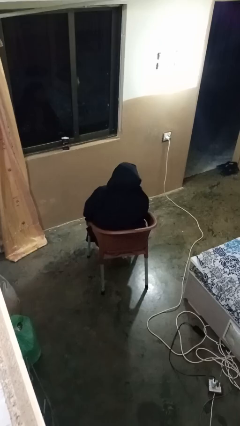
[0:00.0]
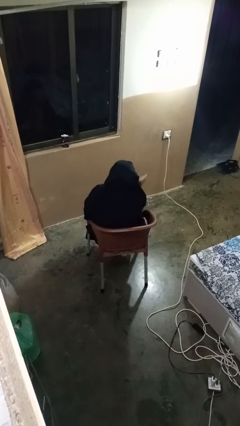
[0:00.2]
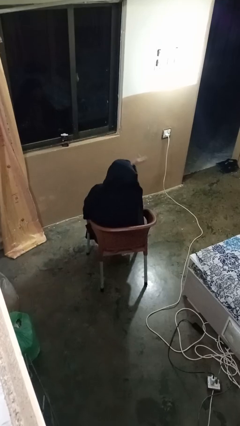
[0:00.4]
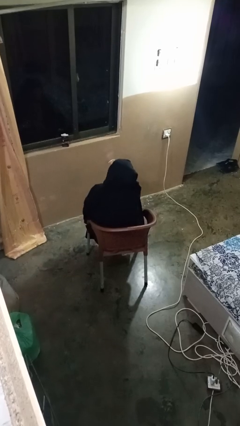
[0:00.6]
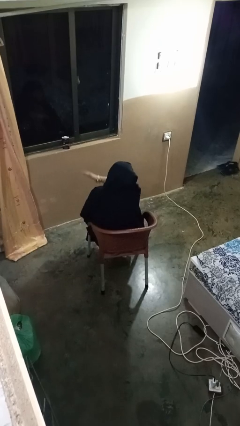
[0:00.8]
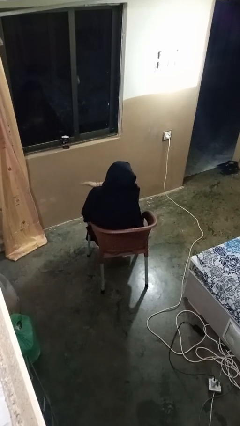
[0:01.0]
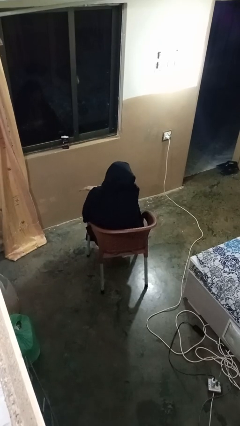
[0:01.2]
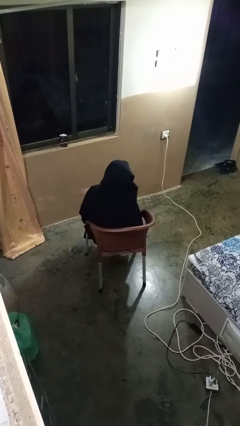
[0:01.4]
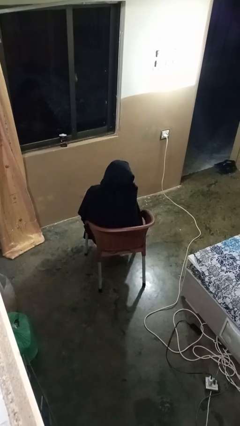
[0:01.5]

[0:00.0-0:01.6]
person gestures swipe left

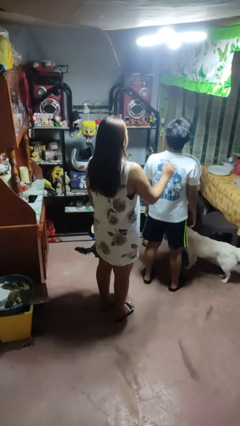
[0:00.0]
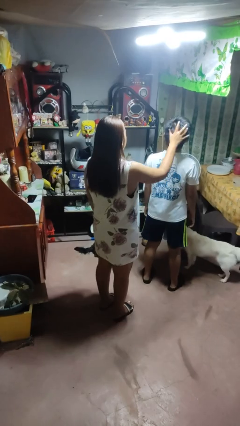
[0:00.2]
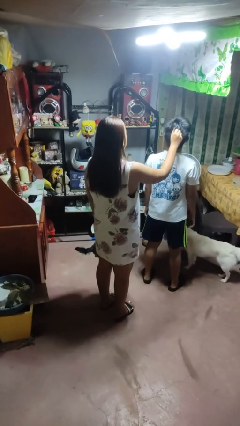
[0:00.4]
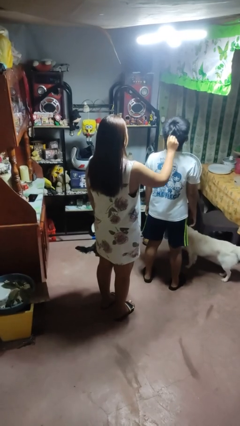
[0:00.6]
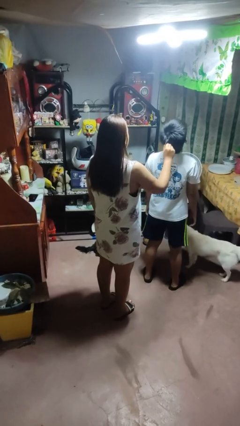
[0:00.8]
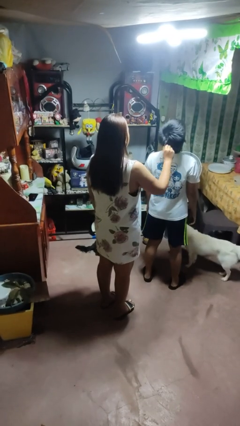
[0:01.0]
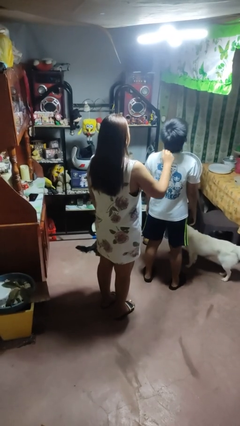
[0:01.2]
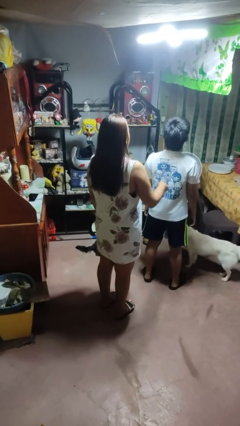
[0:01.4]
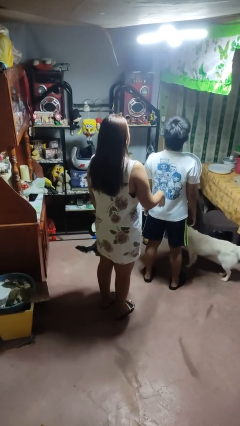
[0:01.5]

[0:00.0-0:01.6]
person grabs person by hair

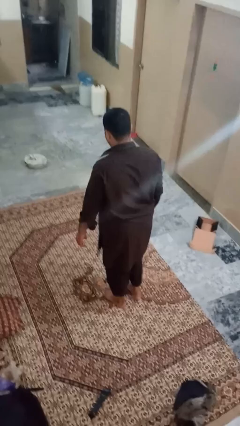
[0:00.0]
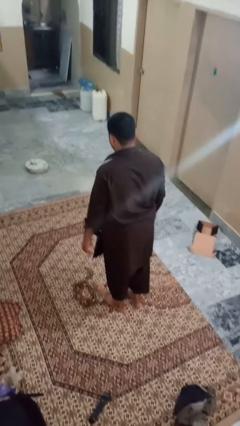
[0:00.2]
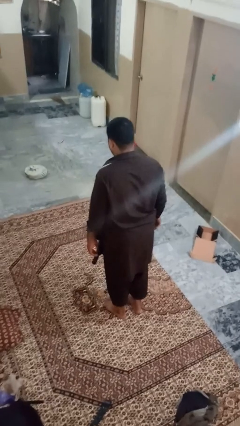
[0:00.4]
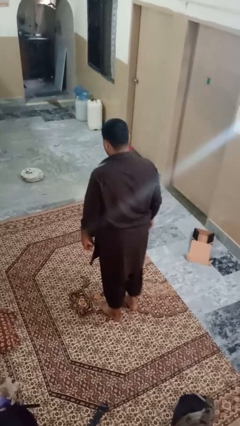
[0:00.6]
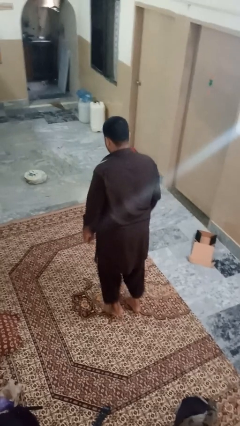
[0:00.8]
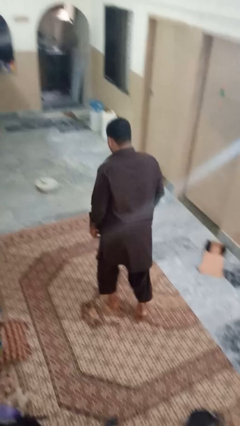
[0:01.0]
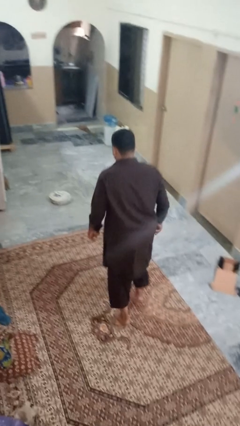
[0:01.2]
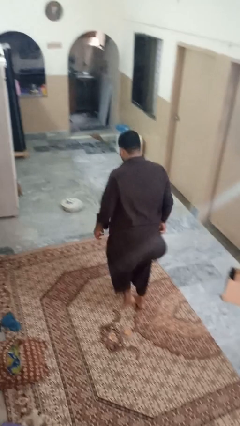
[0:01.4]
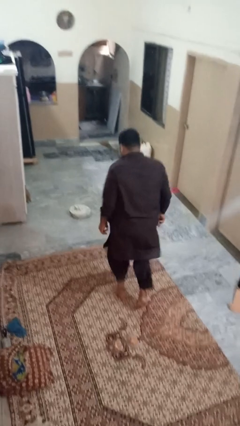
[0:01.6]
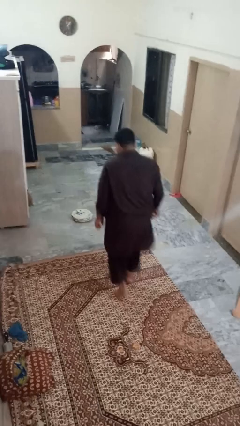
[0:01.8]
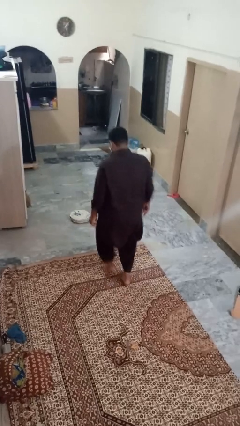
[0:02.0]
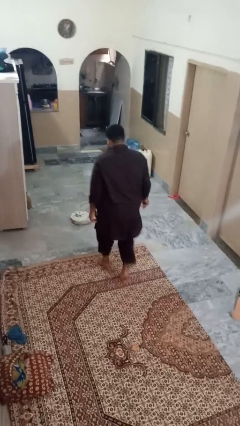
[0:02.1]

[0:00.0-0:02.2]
person walks tiptoe

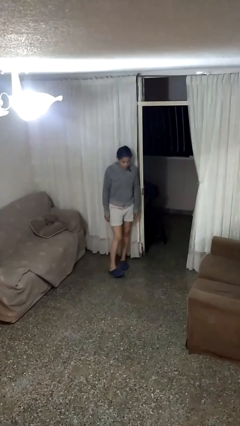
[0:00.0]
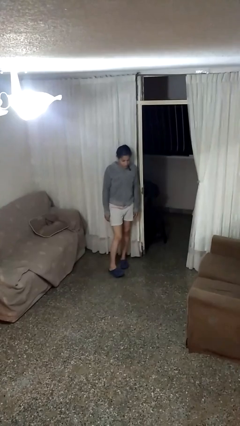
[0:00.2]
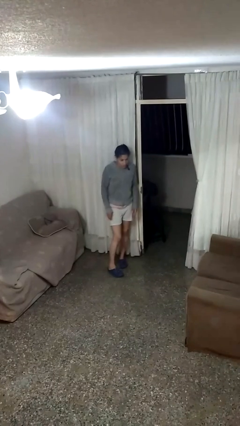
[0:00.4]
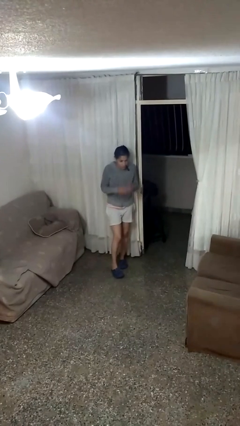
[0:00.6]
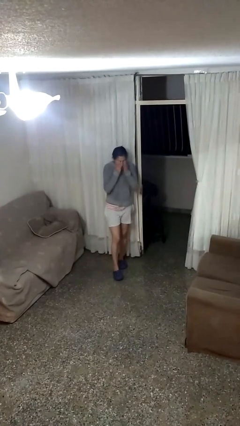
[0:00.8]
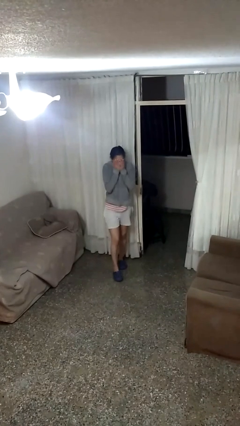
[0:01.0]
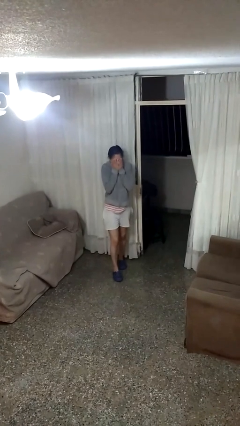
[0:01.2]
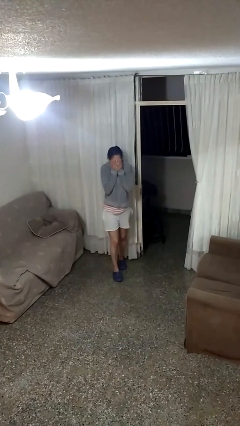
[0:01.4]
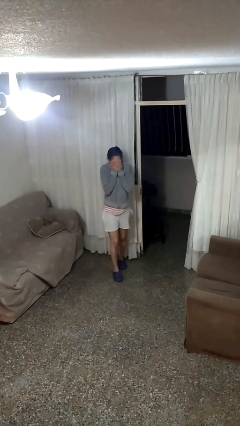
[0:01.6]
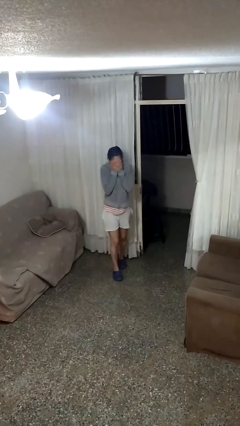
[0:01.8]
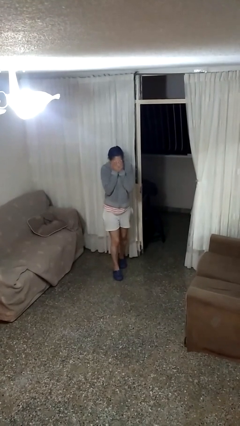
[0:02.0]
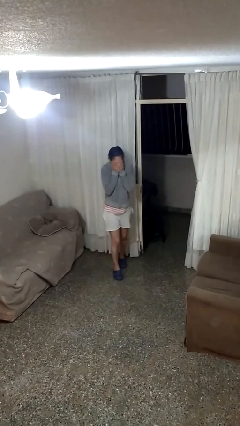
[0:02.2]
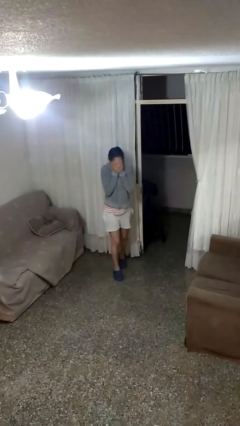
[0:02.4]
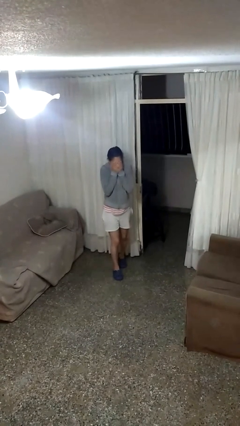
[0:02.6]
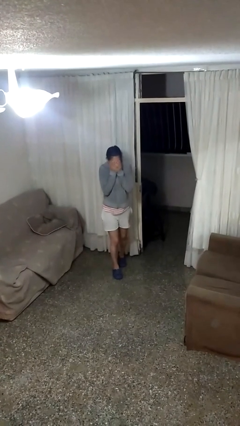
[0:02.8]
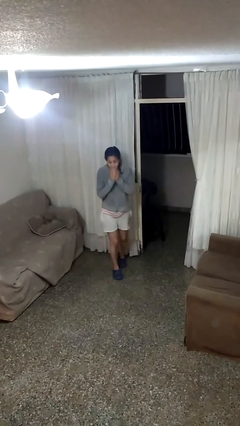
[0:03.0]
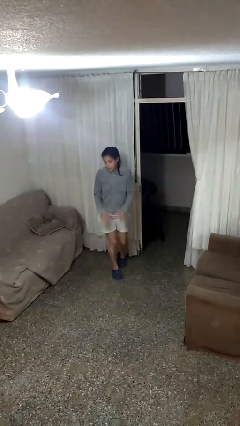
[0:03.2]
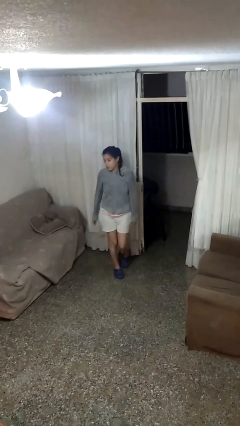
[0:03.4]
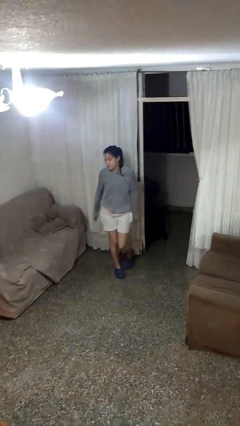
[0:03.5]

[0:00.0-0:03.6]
person covers face with hands

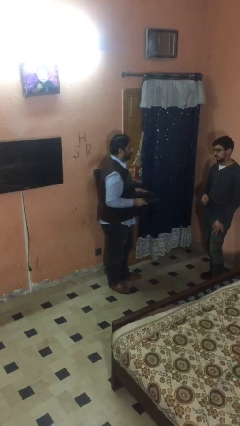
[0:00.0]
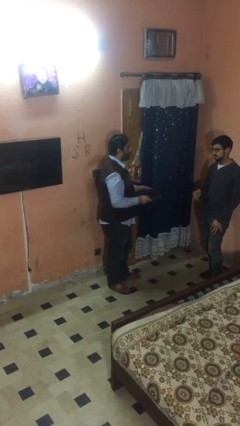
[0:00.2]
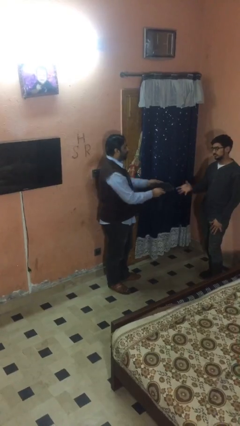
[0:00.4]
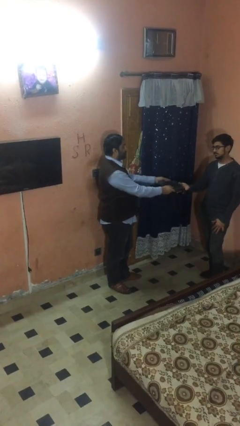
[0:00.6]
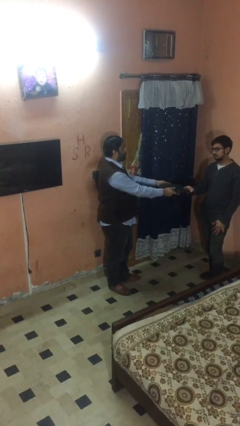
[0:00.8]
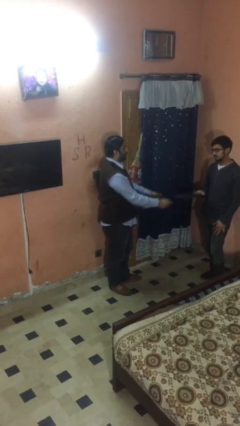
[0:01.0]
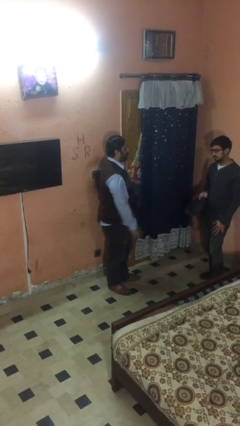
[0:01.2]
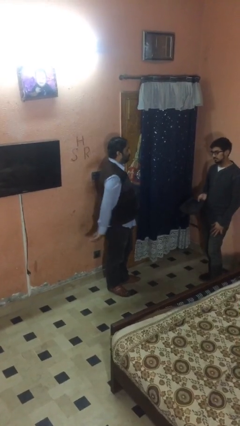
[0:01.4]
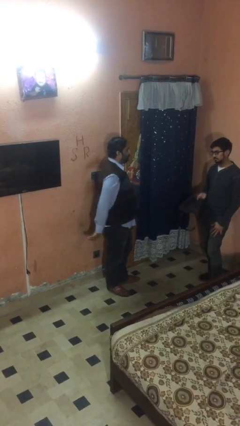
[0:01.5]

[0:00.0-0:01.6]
person transfers object to person

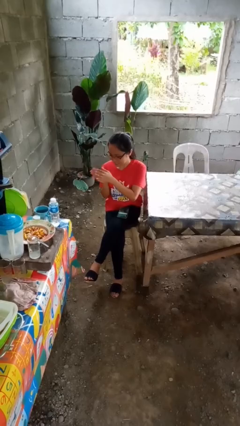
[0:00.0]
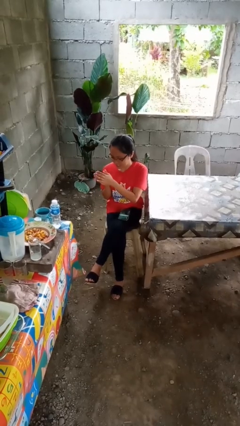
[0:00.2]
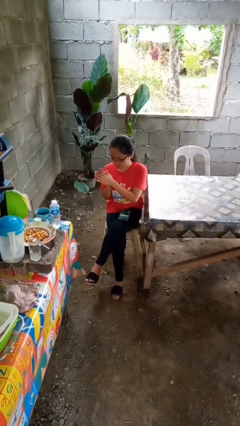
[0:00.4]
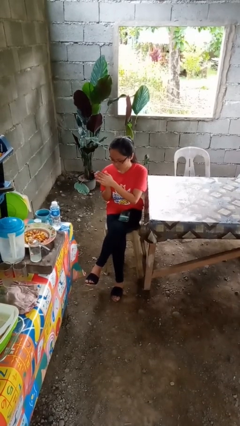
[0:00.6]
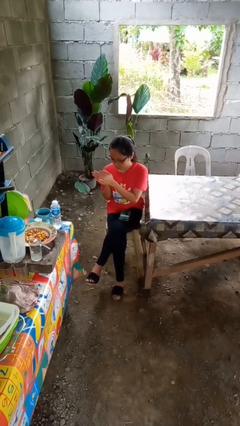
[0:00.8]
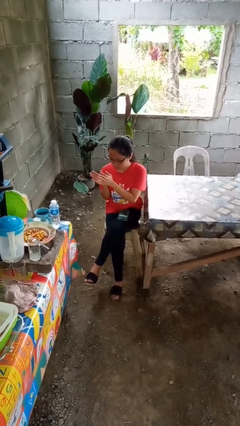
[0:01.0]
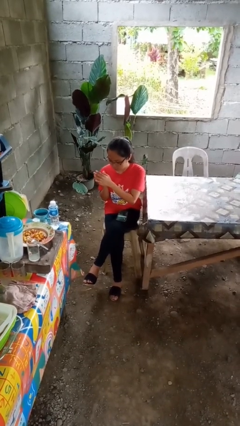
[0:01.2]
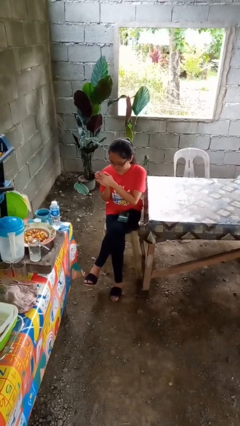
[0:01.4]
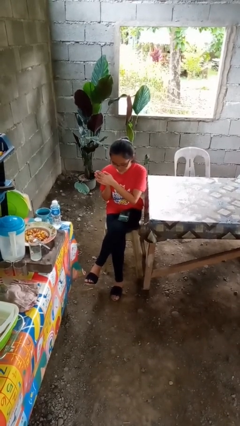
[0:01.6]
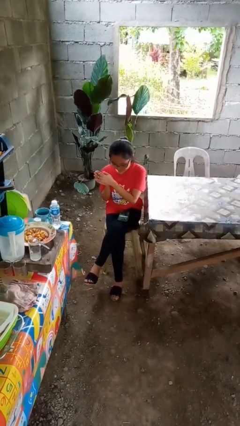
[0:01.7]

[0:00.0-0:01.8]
person claps hands

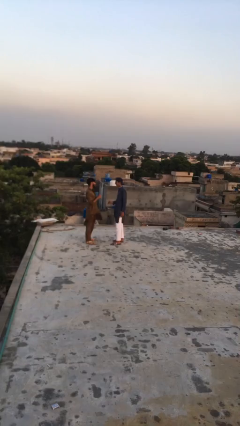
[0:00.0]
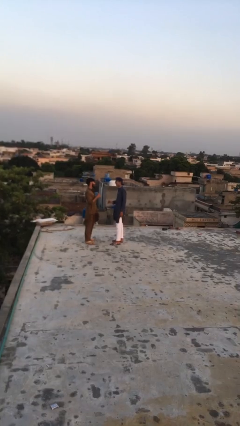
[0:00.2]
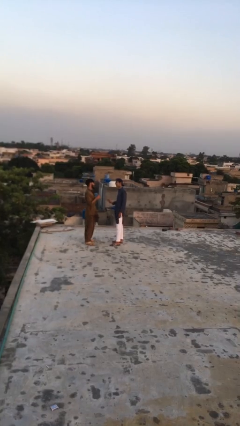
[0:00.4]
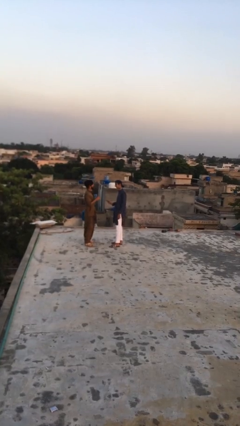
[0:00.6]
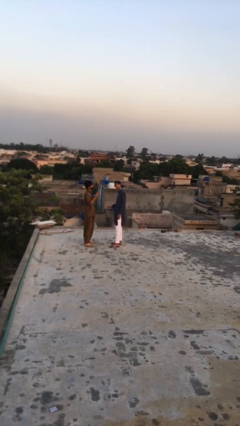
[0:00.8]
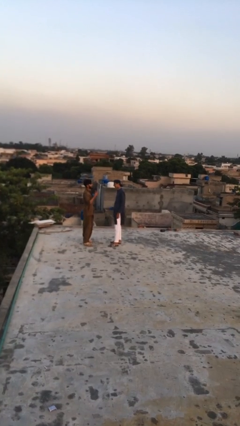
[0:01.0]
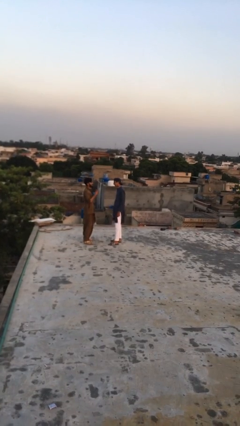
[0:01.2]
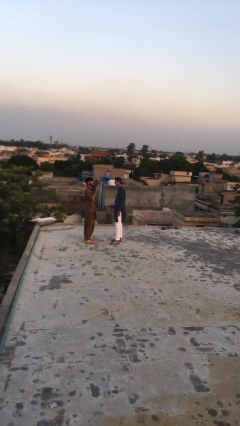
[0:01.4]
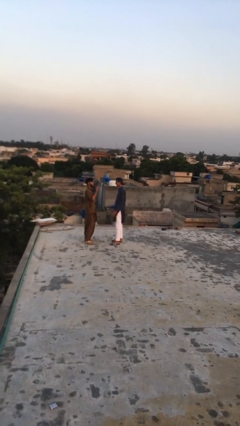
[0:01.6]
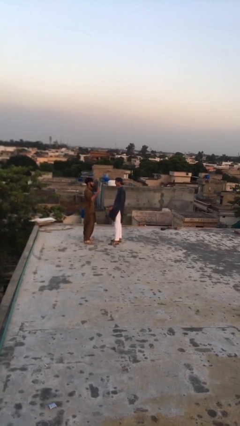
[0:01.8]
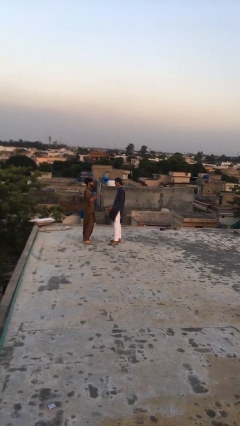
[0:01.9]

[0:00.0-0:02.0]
person talks to person

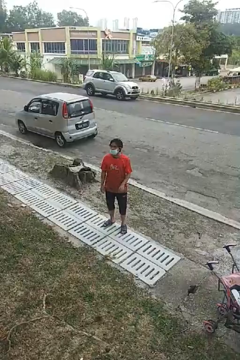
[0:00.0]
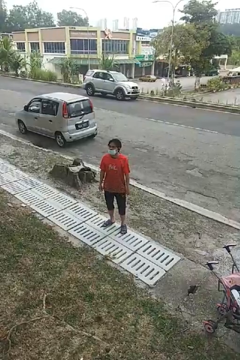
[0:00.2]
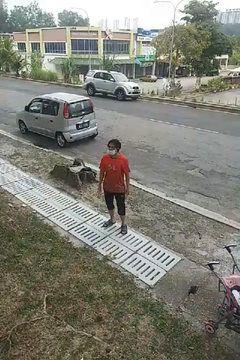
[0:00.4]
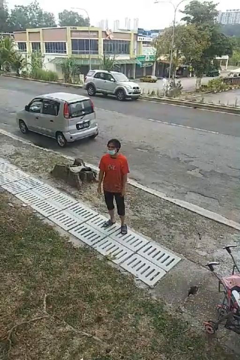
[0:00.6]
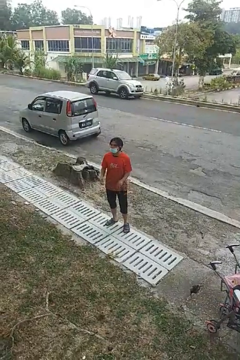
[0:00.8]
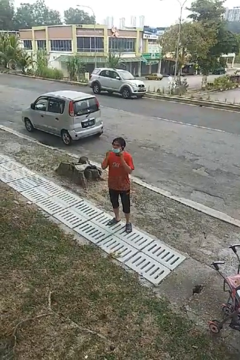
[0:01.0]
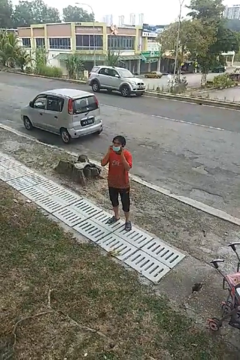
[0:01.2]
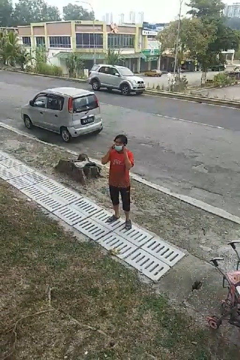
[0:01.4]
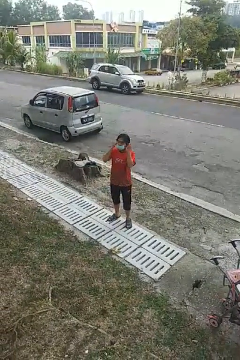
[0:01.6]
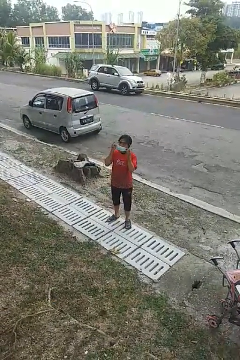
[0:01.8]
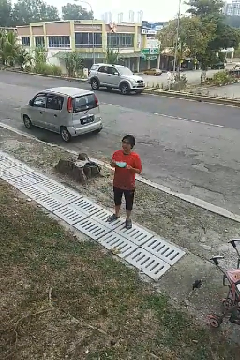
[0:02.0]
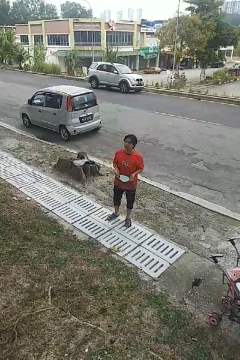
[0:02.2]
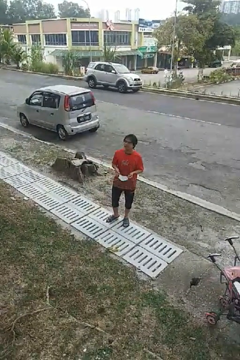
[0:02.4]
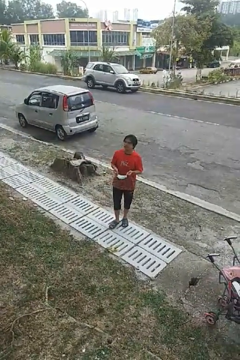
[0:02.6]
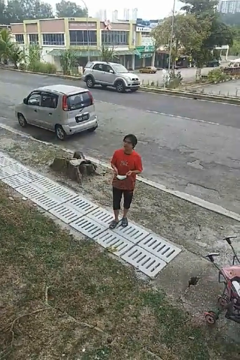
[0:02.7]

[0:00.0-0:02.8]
person takes off facemask
